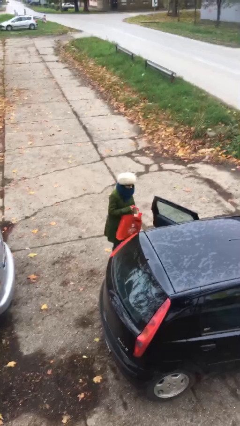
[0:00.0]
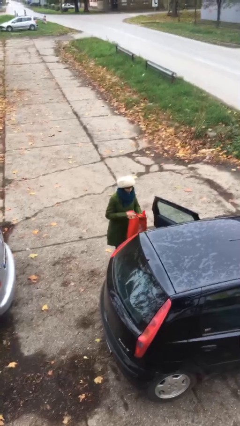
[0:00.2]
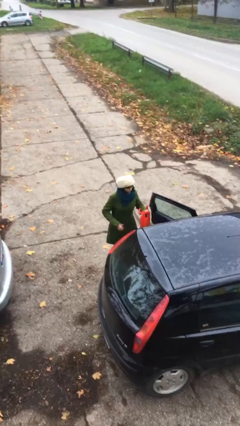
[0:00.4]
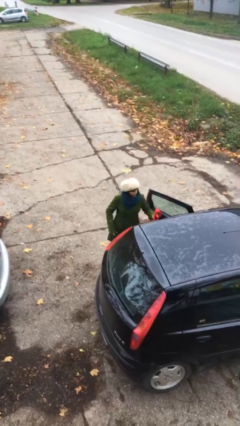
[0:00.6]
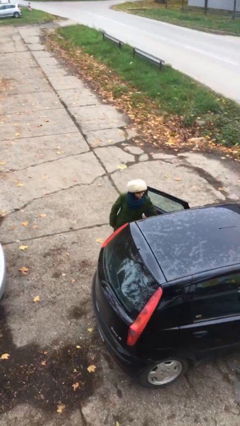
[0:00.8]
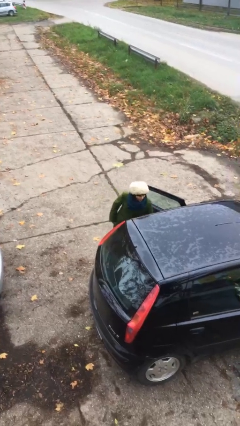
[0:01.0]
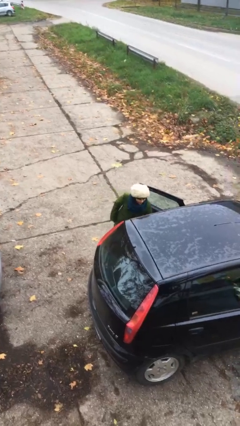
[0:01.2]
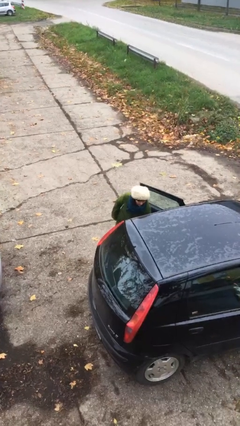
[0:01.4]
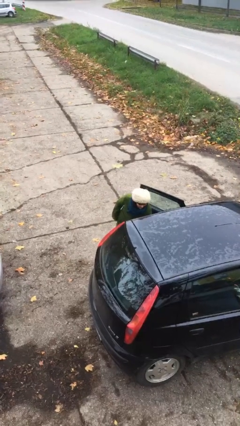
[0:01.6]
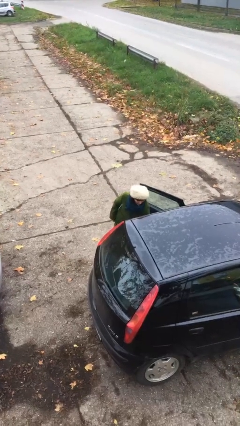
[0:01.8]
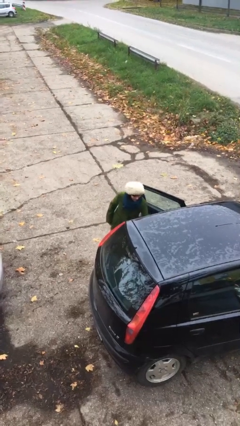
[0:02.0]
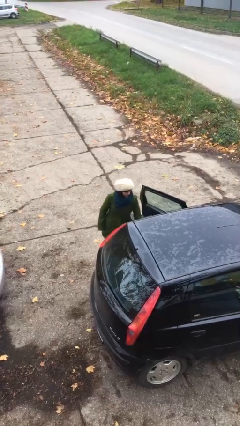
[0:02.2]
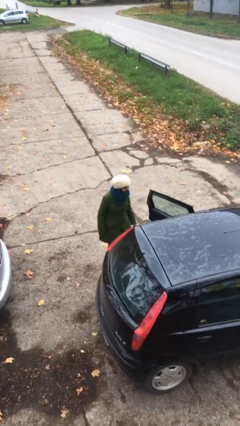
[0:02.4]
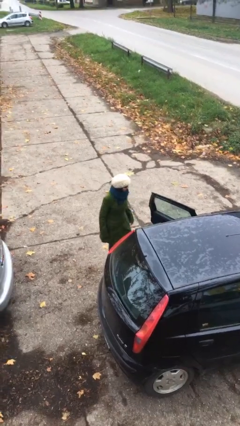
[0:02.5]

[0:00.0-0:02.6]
person loads car

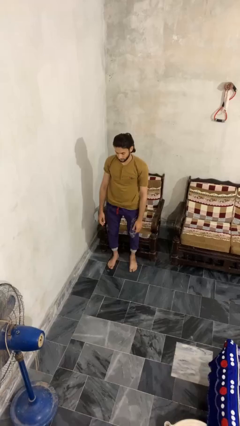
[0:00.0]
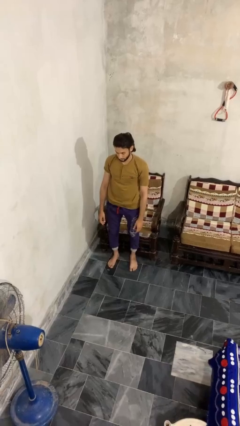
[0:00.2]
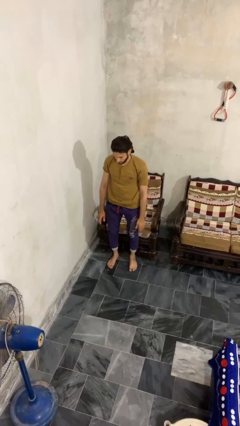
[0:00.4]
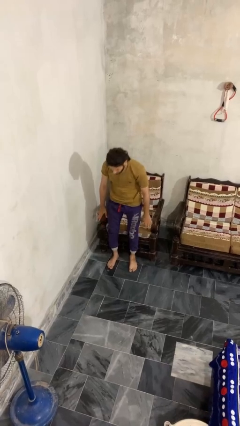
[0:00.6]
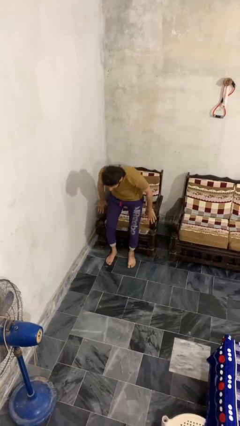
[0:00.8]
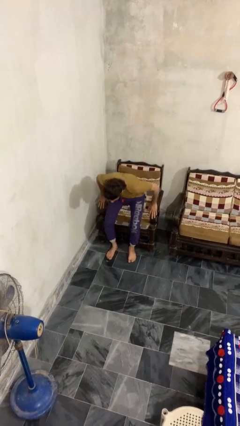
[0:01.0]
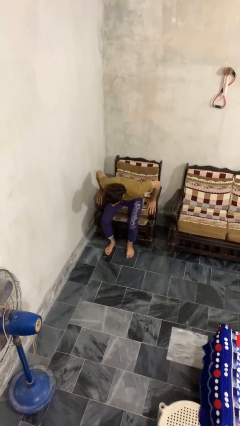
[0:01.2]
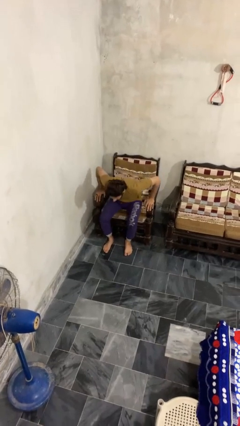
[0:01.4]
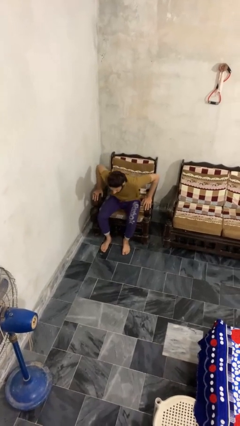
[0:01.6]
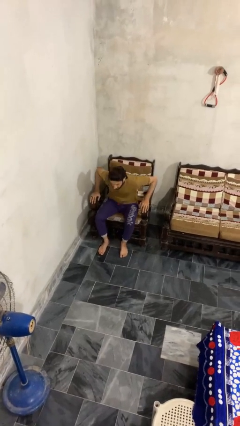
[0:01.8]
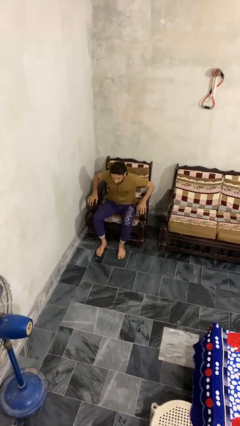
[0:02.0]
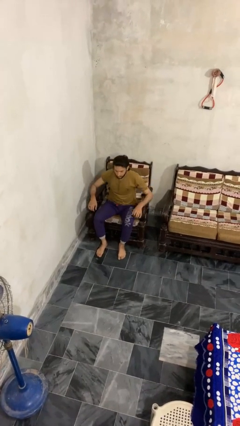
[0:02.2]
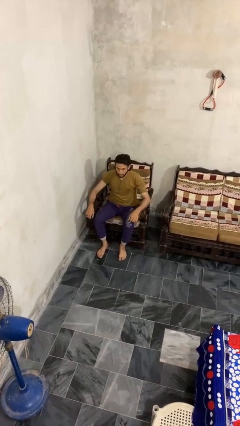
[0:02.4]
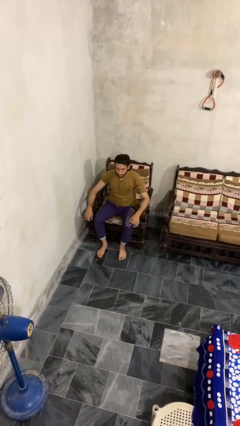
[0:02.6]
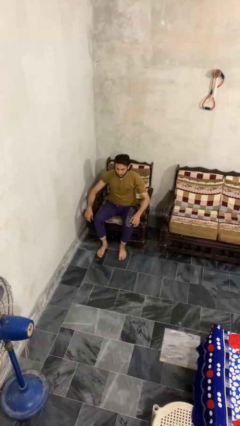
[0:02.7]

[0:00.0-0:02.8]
person sits down

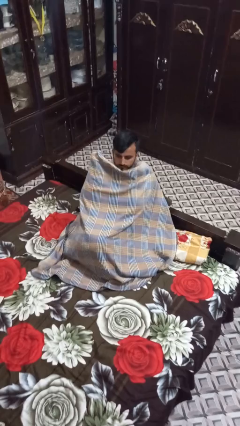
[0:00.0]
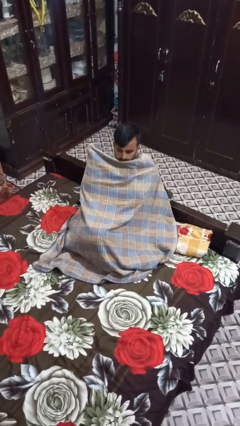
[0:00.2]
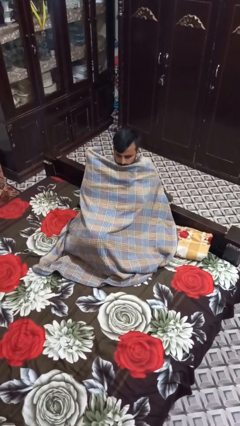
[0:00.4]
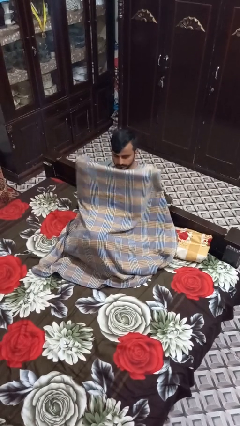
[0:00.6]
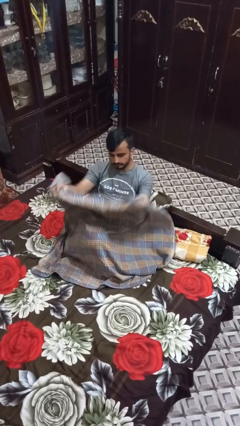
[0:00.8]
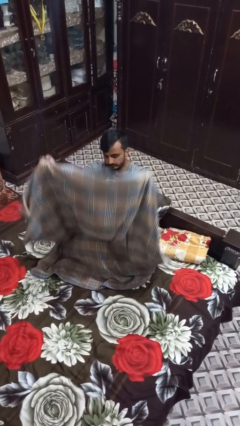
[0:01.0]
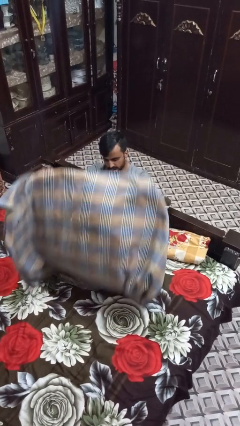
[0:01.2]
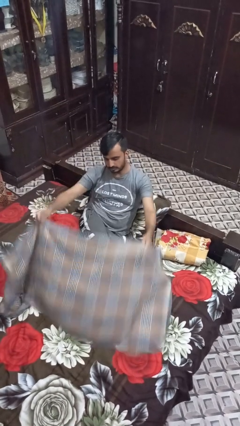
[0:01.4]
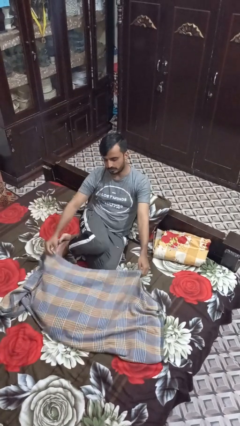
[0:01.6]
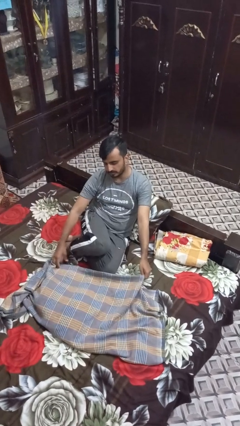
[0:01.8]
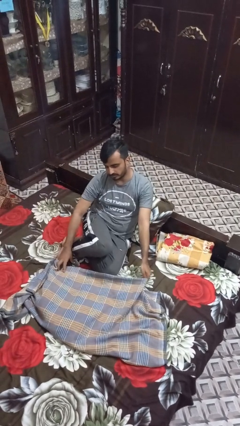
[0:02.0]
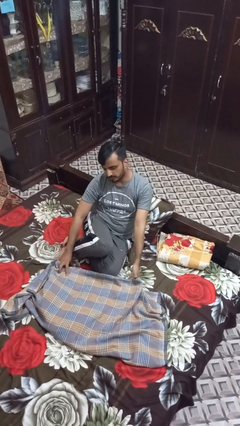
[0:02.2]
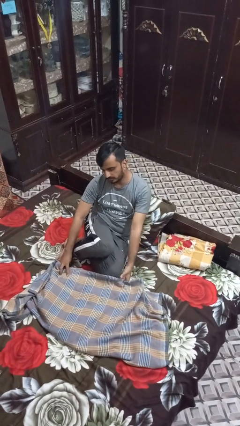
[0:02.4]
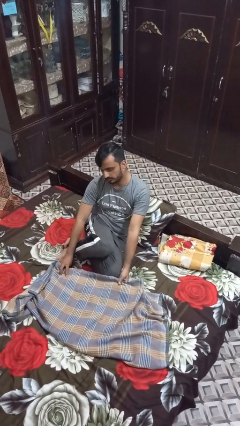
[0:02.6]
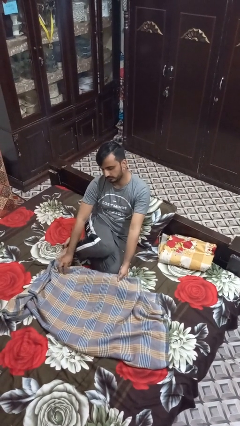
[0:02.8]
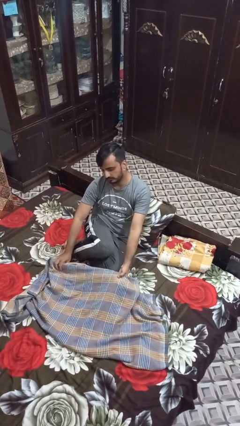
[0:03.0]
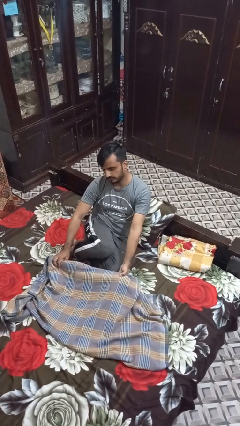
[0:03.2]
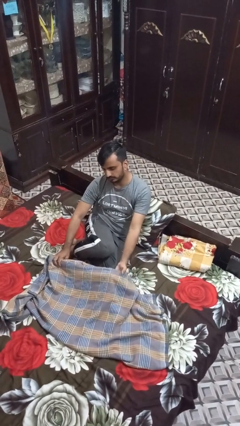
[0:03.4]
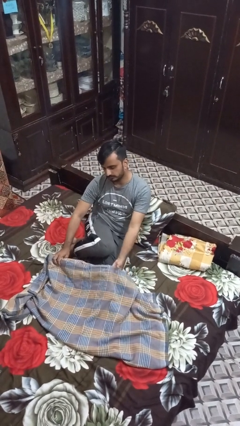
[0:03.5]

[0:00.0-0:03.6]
person uncovers with blanket

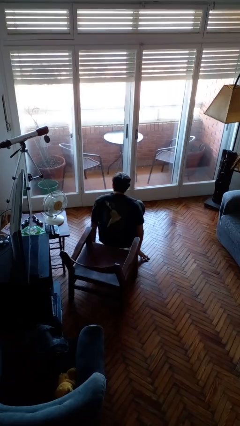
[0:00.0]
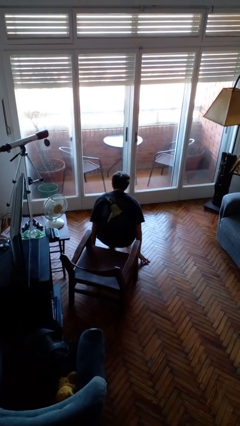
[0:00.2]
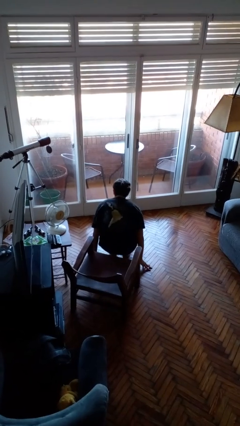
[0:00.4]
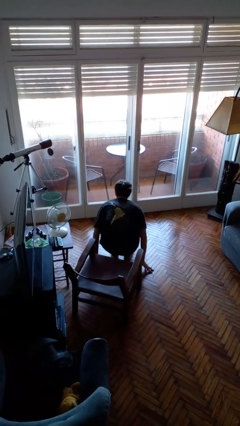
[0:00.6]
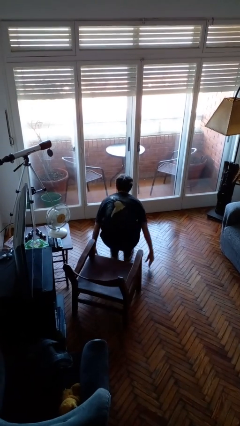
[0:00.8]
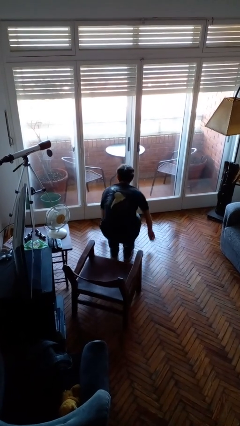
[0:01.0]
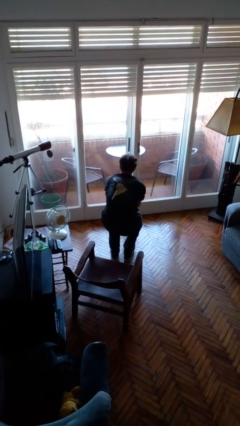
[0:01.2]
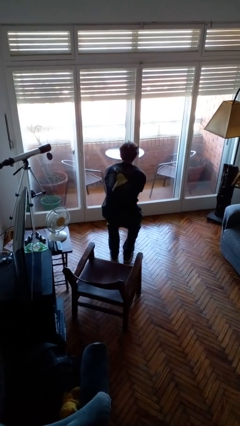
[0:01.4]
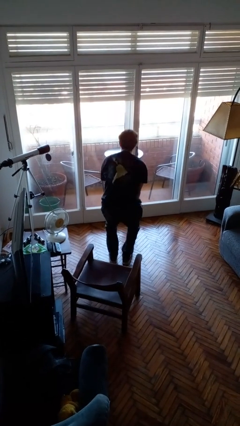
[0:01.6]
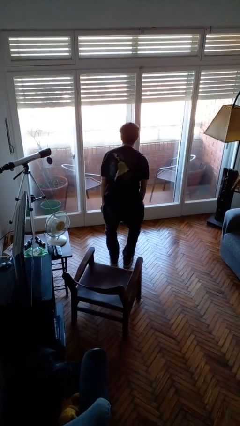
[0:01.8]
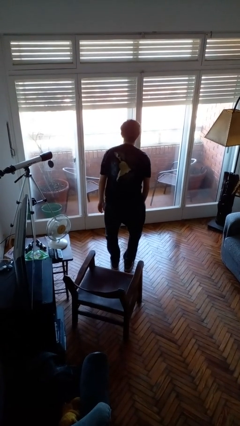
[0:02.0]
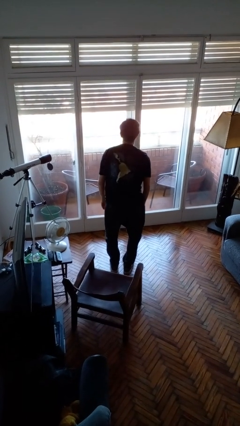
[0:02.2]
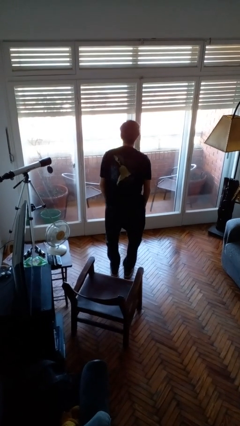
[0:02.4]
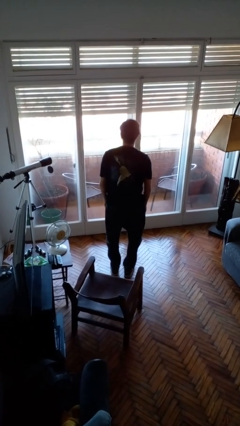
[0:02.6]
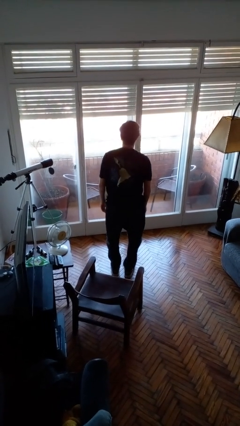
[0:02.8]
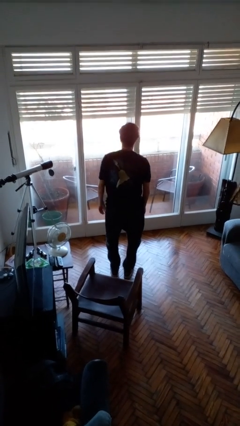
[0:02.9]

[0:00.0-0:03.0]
person stands up from floor

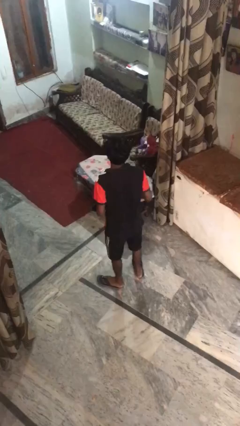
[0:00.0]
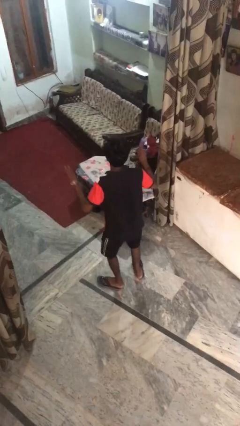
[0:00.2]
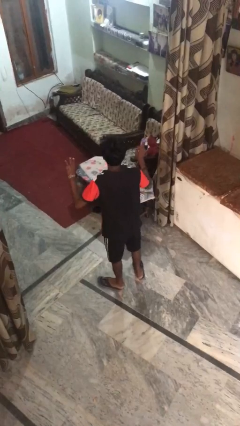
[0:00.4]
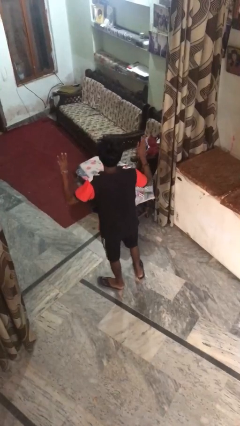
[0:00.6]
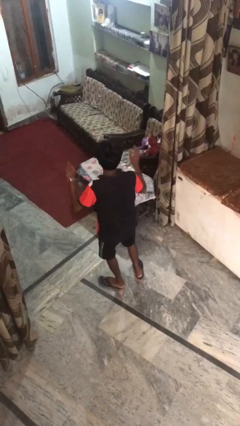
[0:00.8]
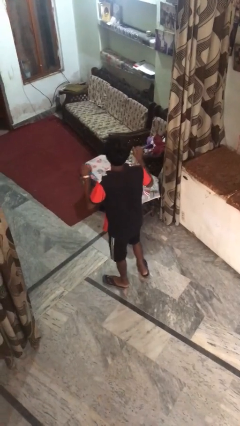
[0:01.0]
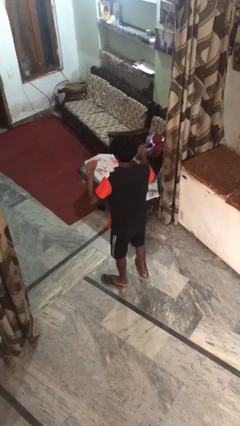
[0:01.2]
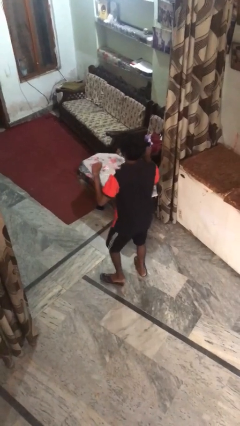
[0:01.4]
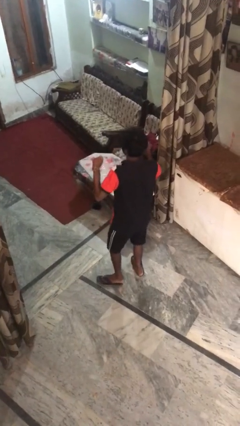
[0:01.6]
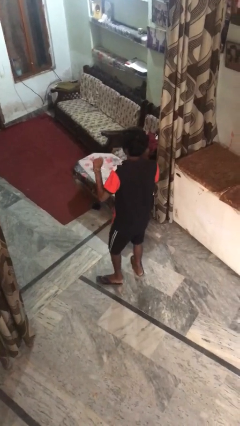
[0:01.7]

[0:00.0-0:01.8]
person dances in place

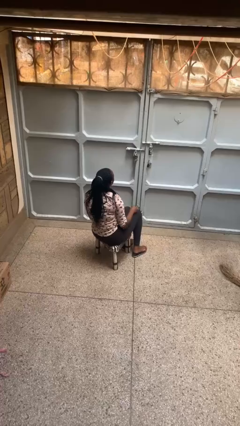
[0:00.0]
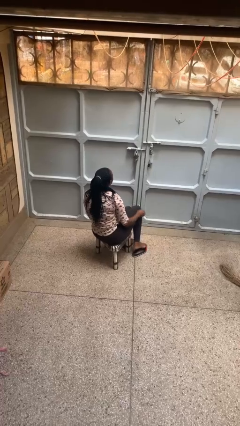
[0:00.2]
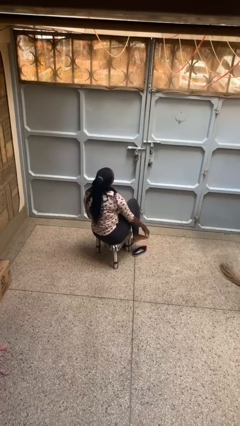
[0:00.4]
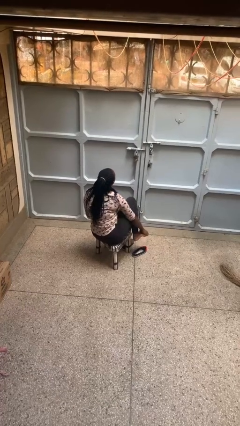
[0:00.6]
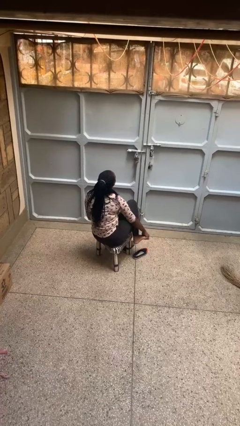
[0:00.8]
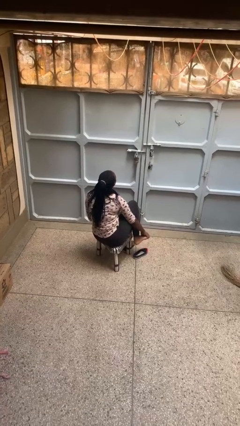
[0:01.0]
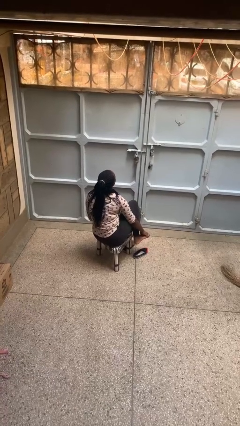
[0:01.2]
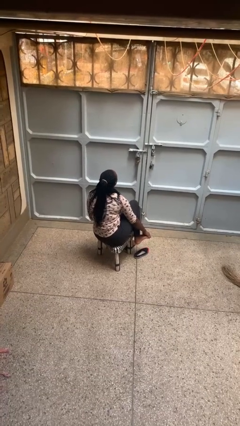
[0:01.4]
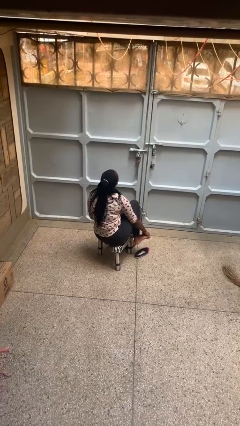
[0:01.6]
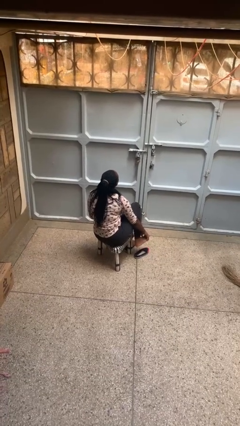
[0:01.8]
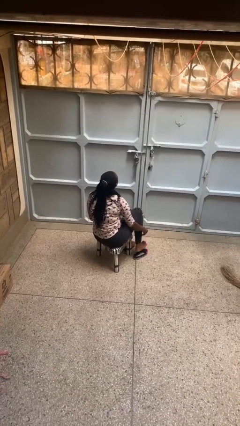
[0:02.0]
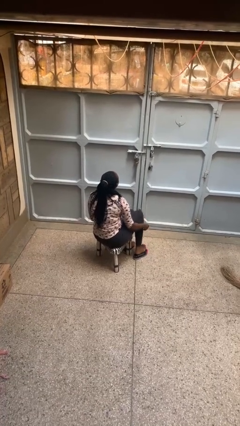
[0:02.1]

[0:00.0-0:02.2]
person rubs foot

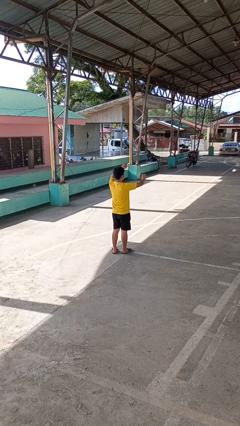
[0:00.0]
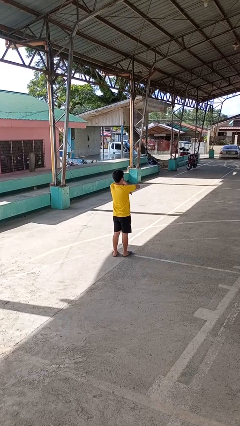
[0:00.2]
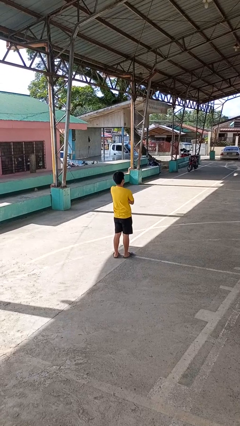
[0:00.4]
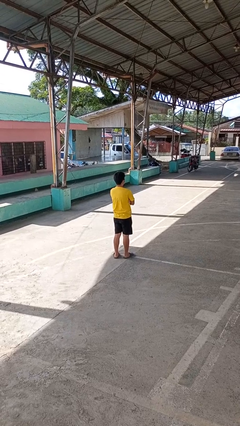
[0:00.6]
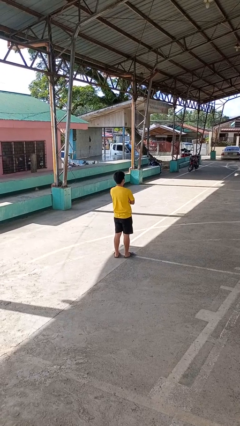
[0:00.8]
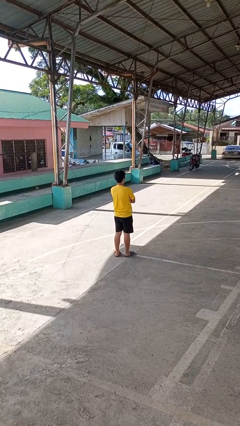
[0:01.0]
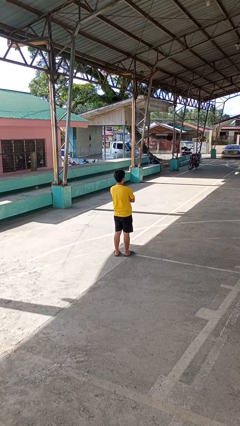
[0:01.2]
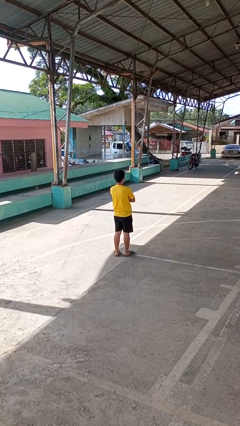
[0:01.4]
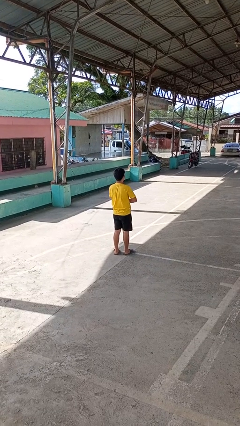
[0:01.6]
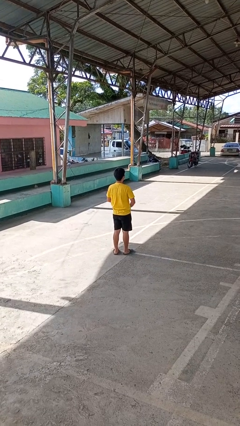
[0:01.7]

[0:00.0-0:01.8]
person crosses arms
